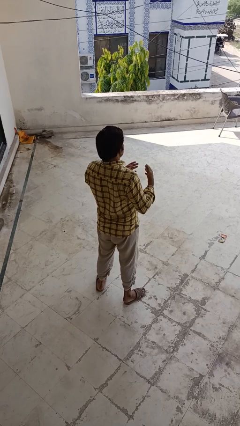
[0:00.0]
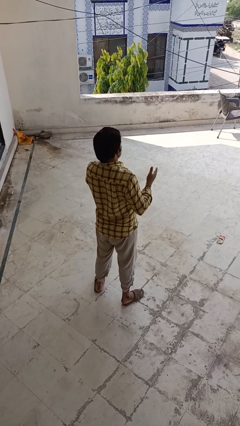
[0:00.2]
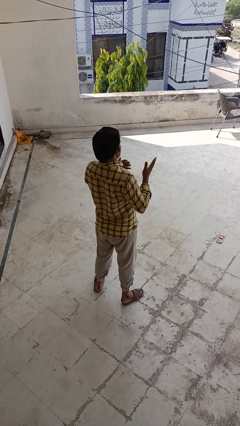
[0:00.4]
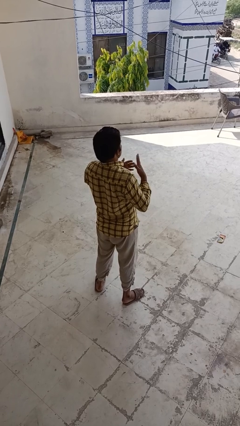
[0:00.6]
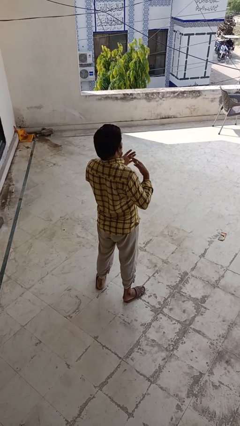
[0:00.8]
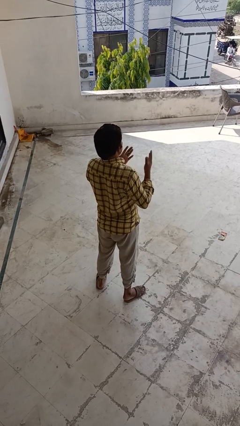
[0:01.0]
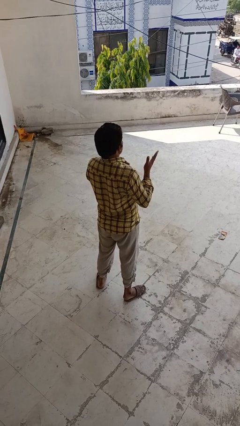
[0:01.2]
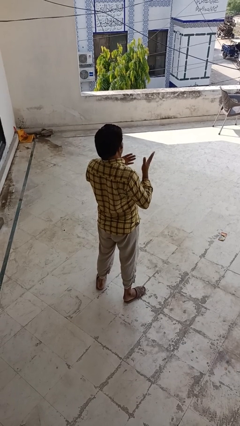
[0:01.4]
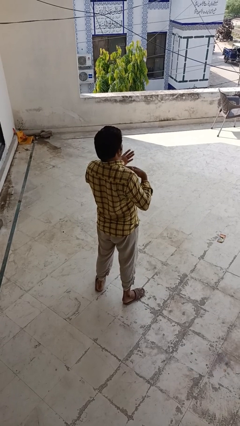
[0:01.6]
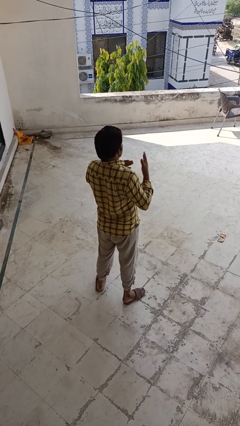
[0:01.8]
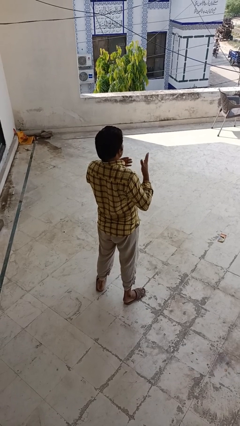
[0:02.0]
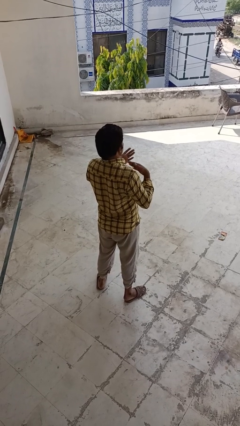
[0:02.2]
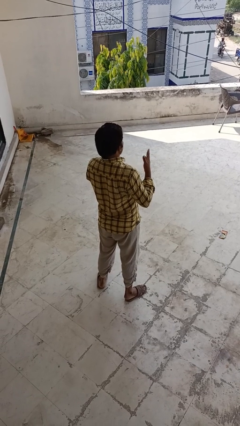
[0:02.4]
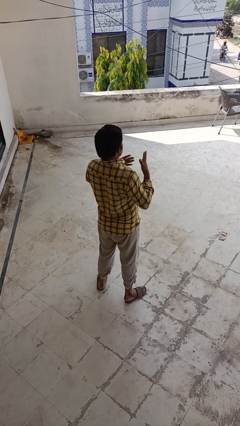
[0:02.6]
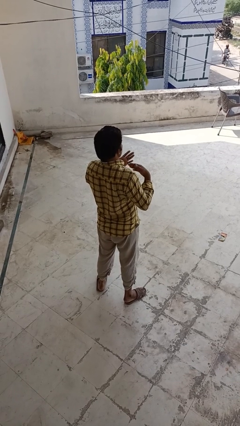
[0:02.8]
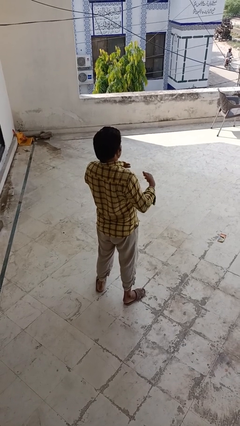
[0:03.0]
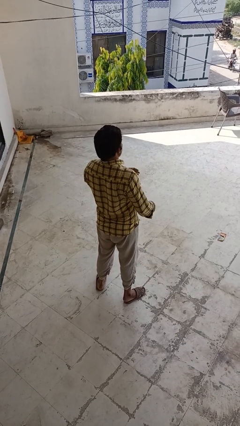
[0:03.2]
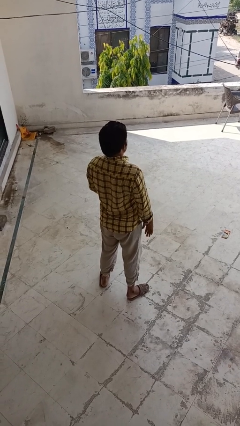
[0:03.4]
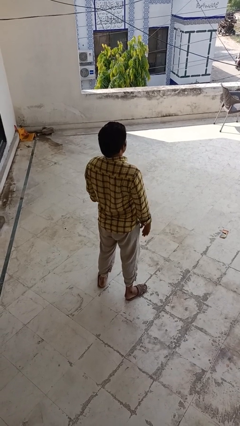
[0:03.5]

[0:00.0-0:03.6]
person drums on chest

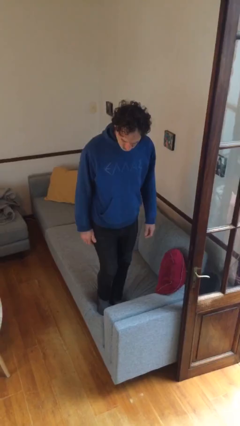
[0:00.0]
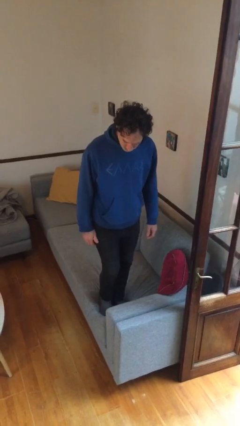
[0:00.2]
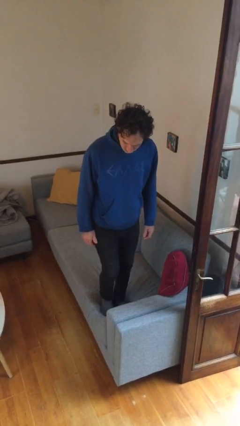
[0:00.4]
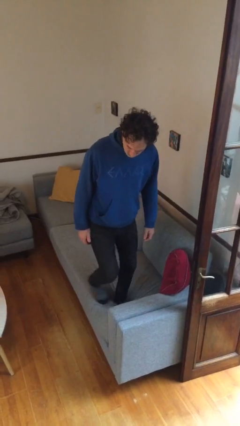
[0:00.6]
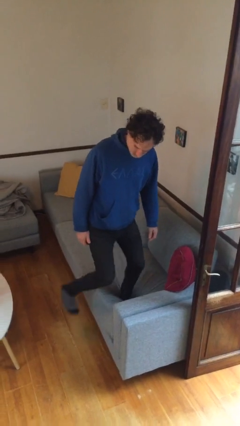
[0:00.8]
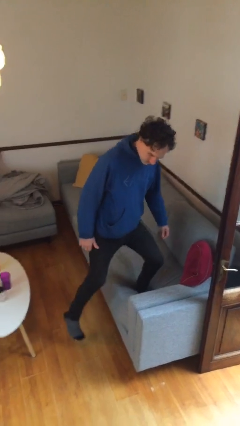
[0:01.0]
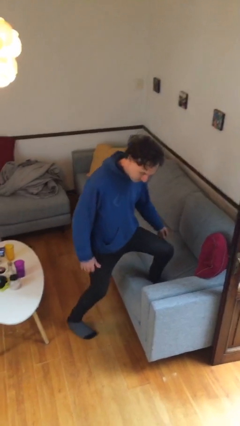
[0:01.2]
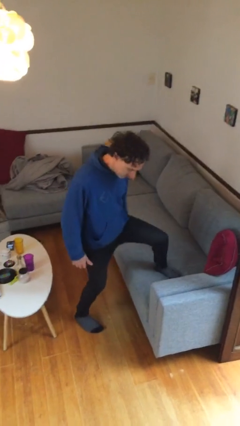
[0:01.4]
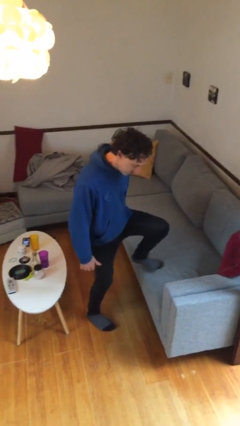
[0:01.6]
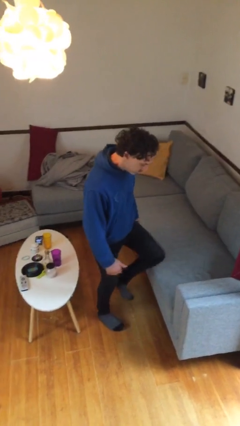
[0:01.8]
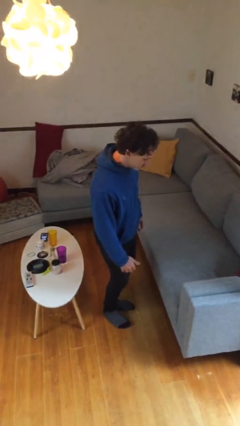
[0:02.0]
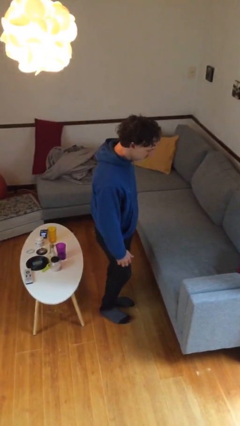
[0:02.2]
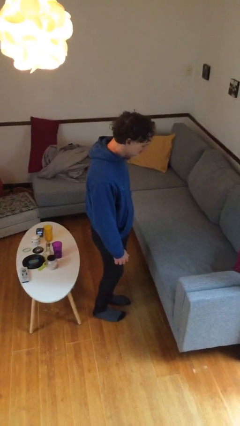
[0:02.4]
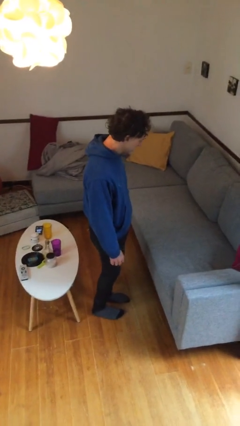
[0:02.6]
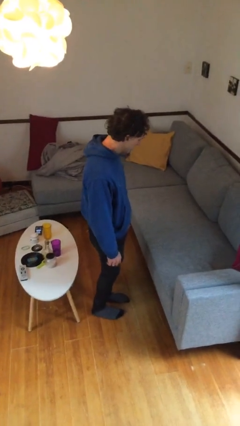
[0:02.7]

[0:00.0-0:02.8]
person climbs off couch

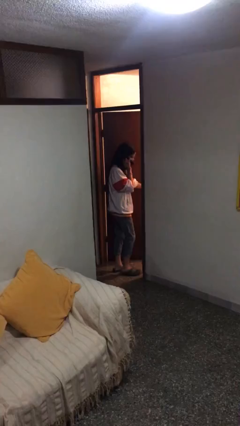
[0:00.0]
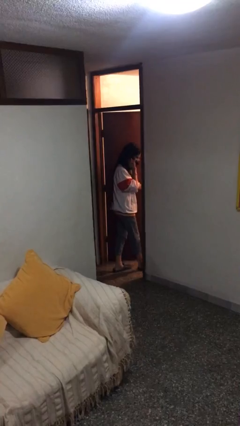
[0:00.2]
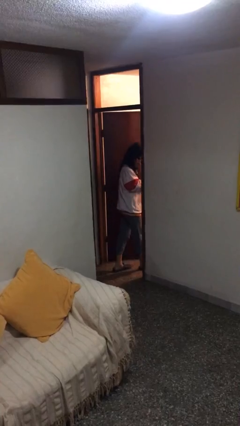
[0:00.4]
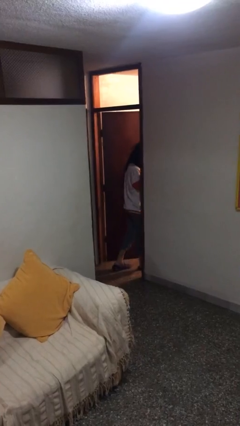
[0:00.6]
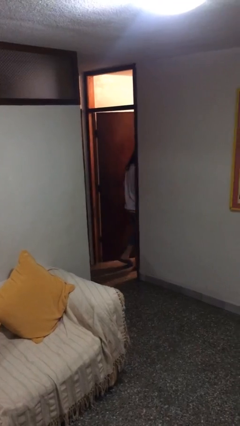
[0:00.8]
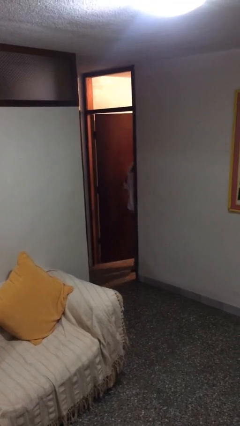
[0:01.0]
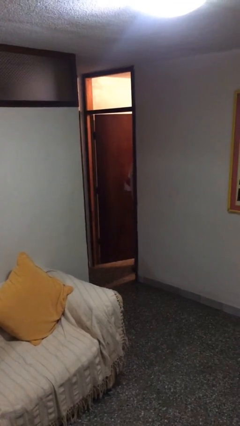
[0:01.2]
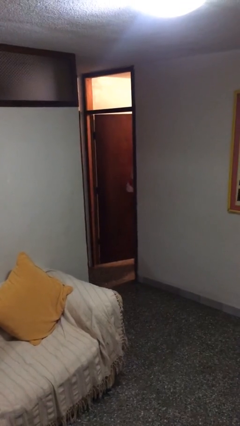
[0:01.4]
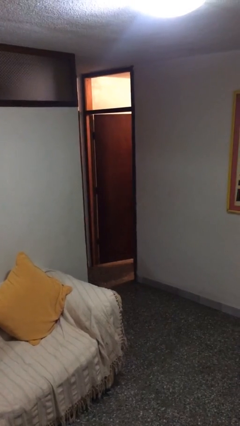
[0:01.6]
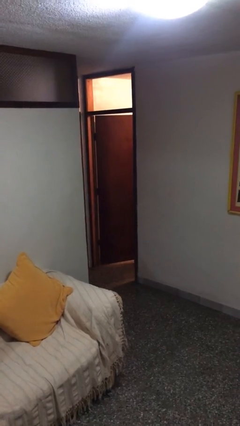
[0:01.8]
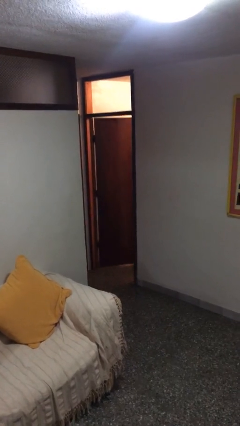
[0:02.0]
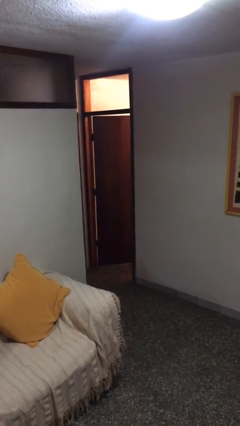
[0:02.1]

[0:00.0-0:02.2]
person exits scene through structure

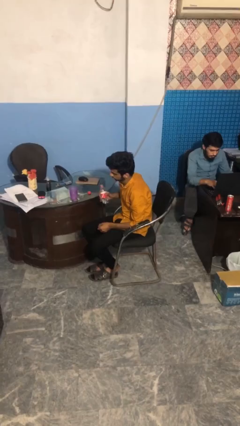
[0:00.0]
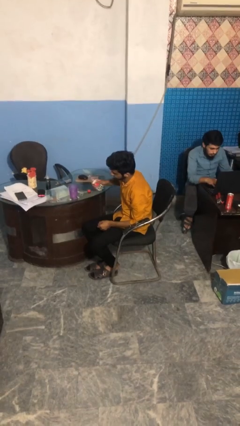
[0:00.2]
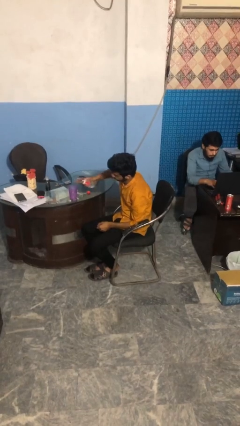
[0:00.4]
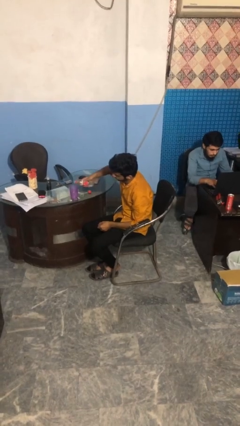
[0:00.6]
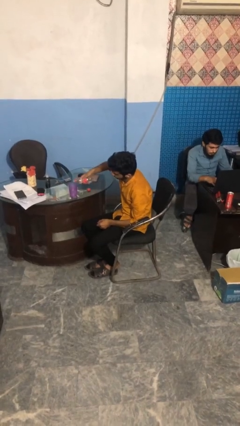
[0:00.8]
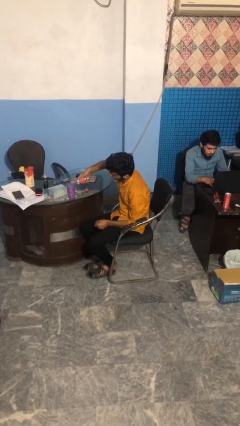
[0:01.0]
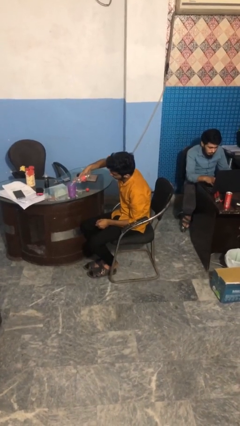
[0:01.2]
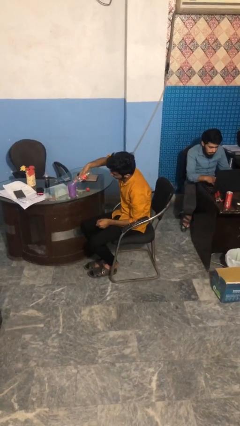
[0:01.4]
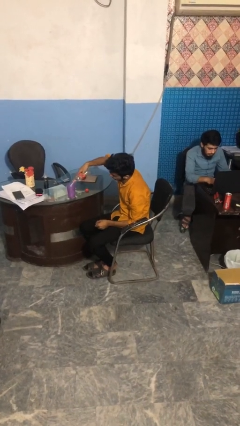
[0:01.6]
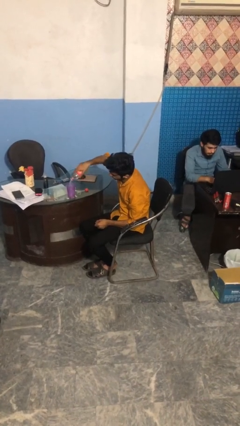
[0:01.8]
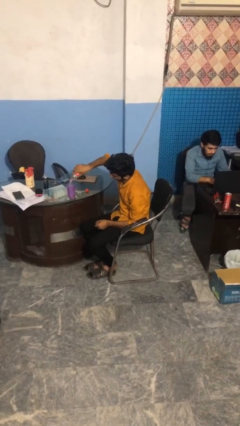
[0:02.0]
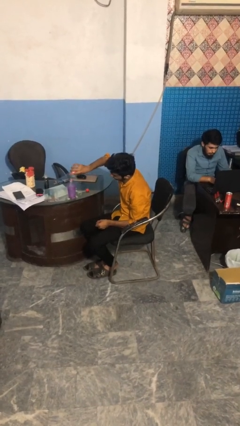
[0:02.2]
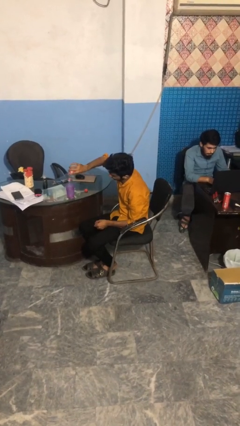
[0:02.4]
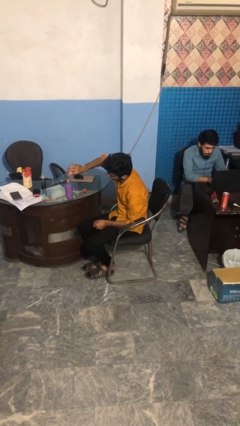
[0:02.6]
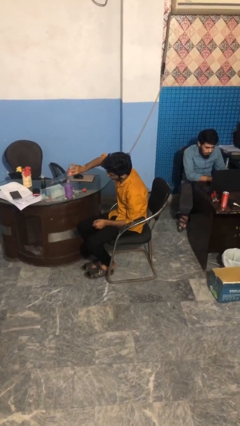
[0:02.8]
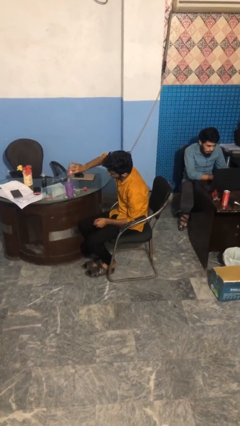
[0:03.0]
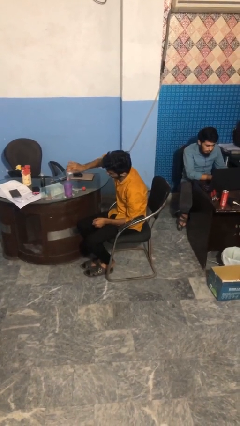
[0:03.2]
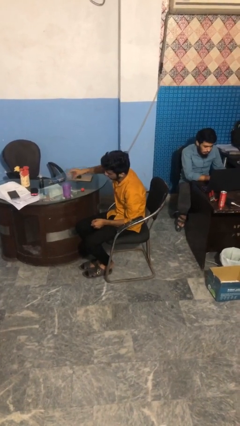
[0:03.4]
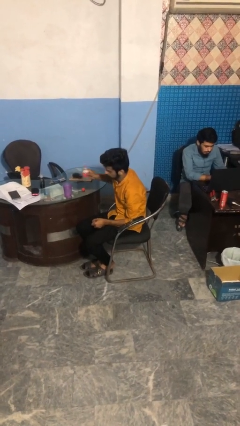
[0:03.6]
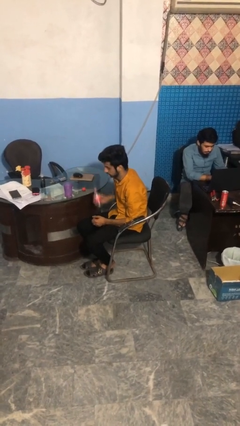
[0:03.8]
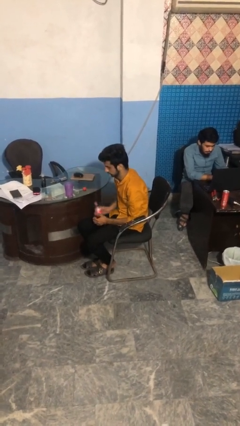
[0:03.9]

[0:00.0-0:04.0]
person pours liquid into cup

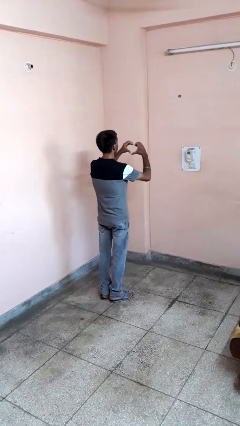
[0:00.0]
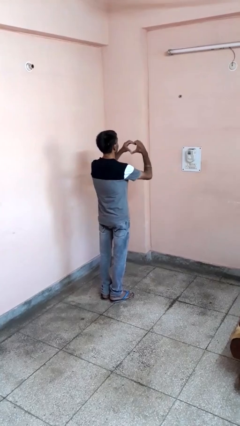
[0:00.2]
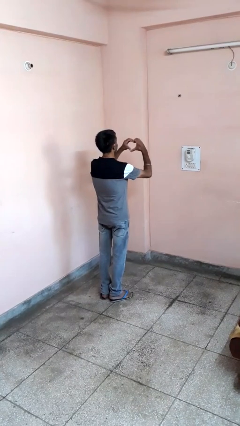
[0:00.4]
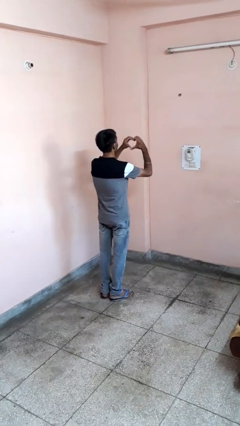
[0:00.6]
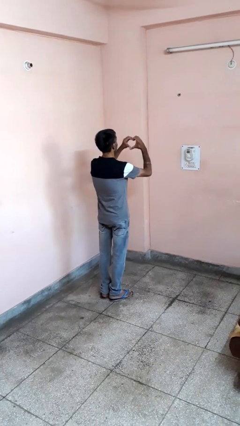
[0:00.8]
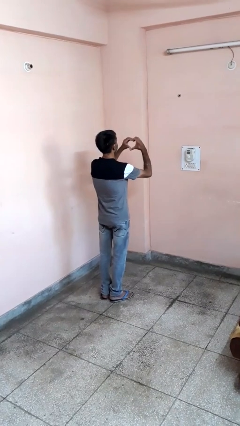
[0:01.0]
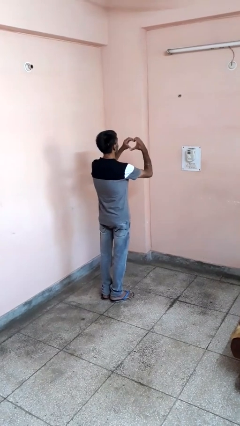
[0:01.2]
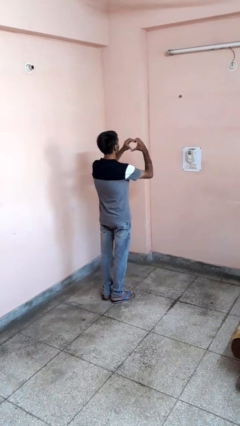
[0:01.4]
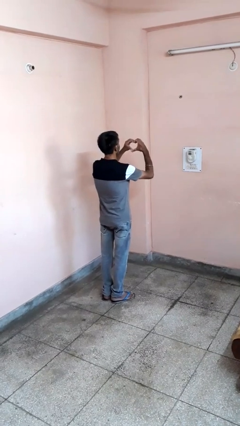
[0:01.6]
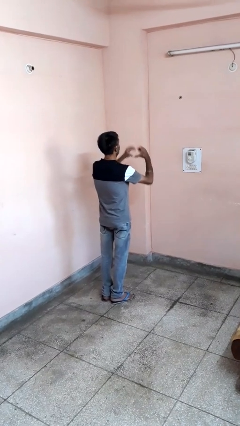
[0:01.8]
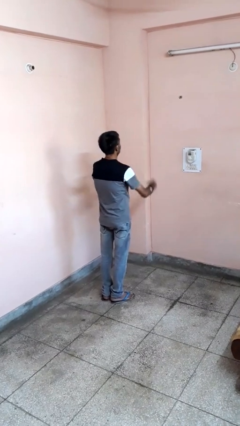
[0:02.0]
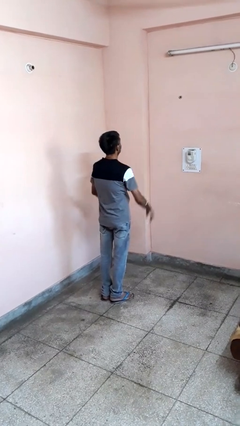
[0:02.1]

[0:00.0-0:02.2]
person gestures heart

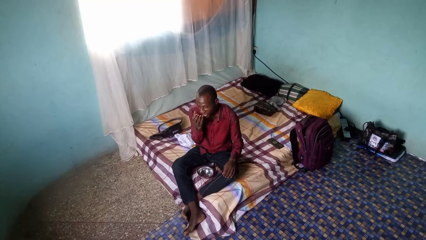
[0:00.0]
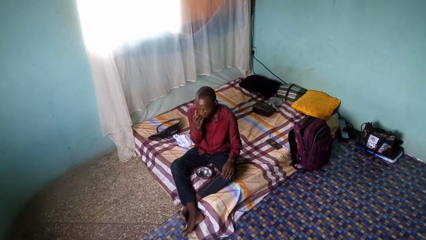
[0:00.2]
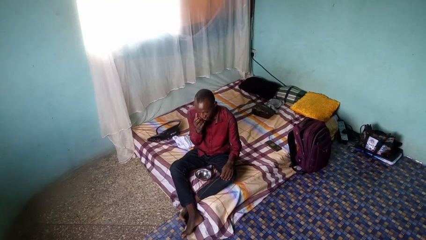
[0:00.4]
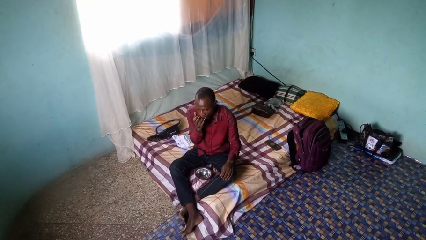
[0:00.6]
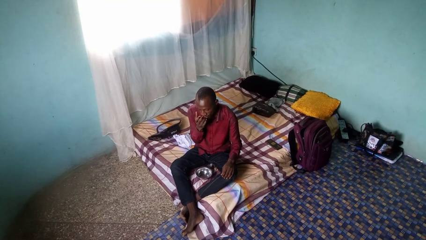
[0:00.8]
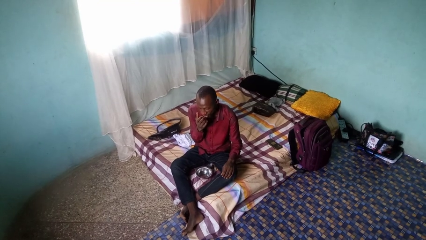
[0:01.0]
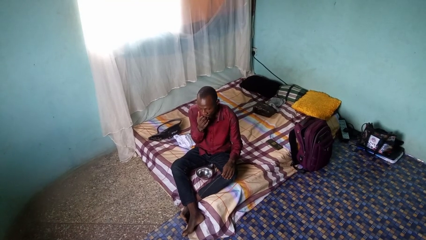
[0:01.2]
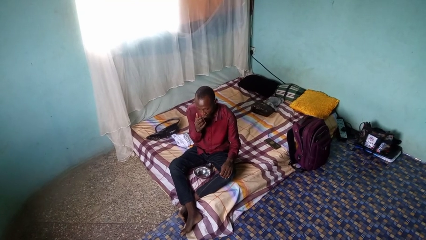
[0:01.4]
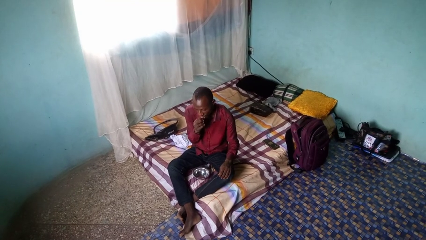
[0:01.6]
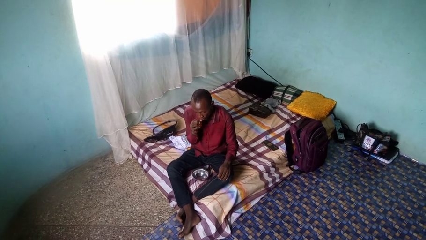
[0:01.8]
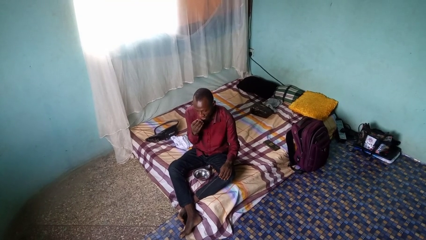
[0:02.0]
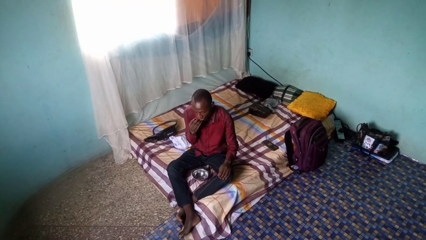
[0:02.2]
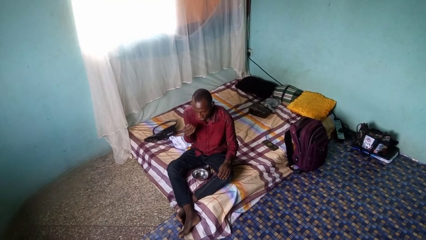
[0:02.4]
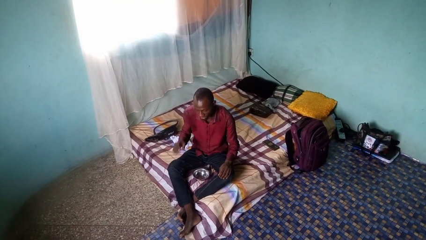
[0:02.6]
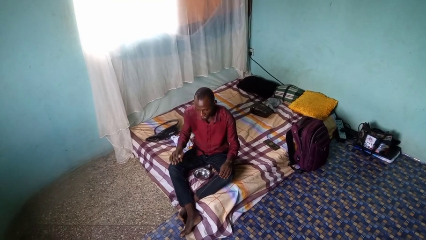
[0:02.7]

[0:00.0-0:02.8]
person licks fingers
